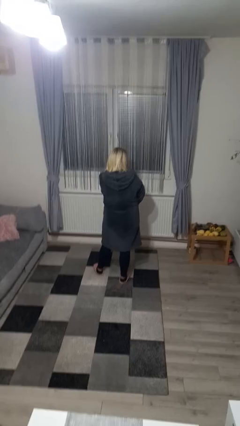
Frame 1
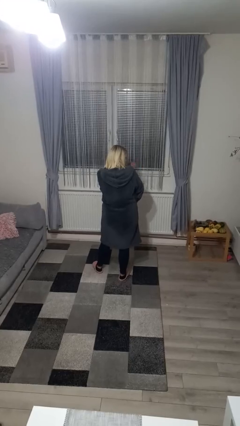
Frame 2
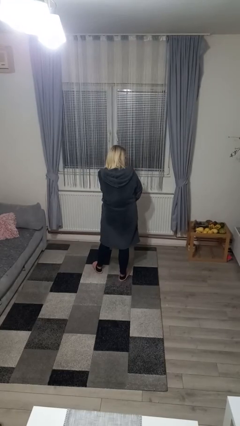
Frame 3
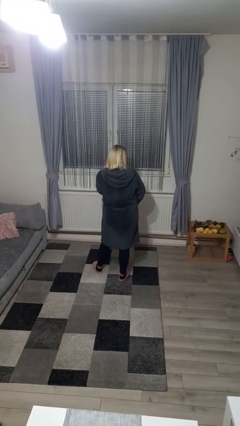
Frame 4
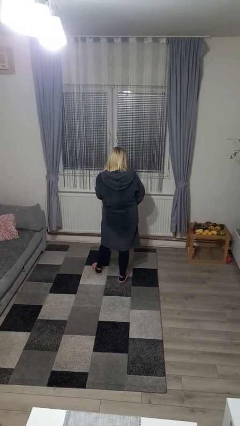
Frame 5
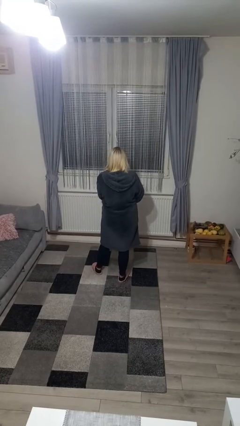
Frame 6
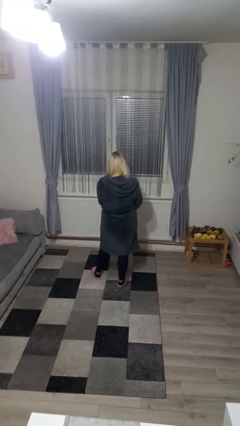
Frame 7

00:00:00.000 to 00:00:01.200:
person swats bug

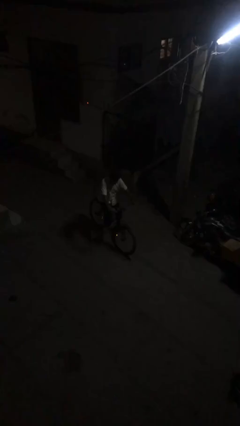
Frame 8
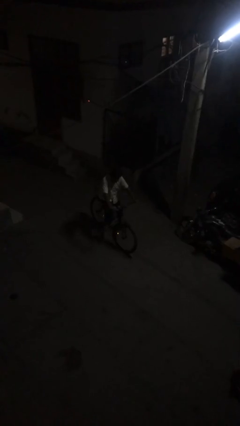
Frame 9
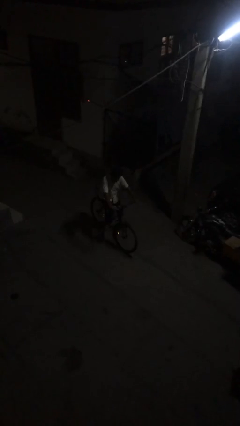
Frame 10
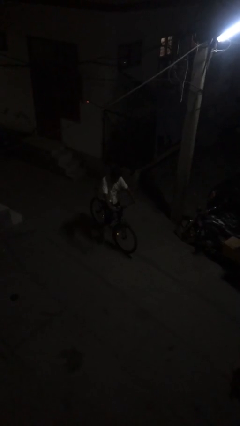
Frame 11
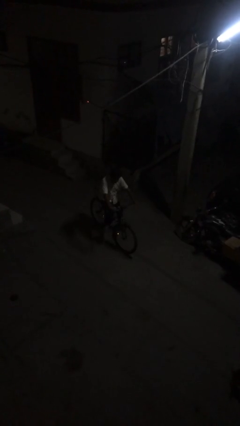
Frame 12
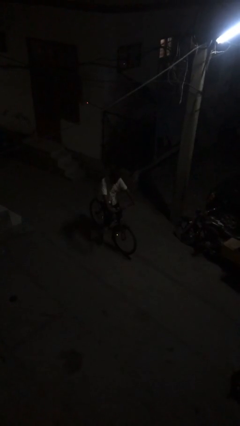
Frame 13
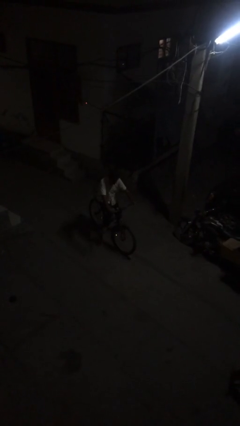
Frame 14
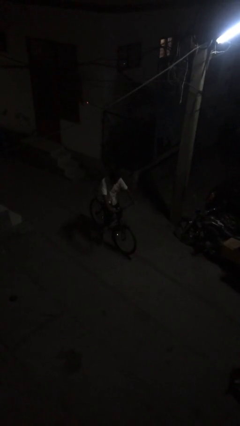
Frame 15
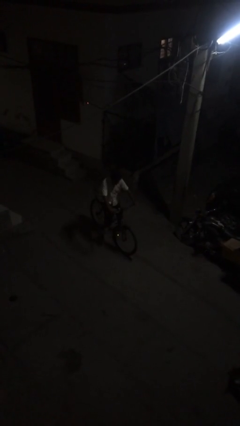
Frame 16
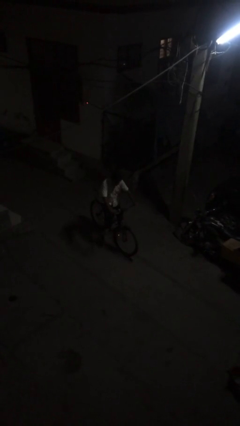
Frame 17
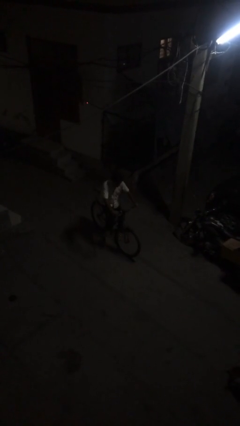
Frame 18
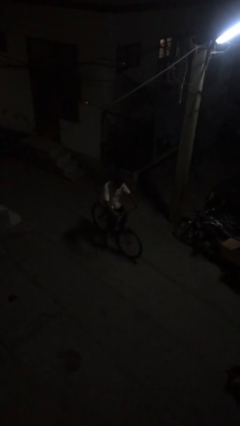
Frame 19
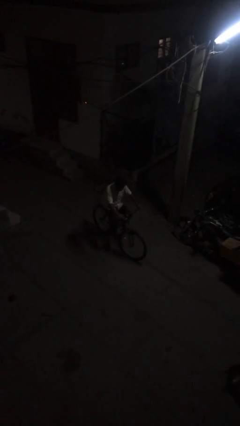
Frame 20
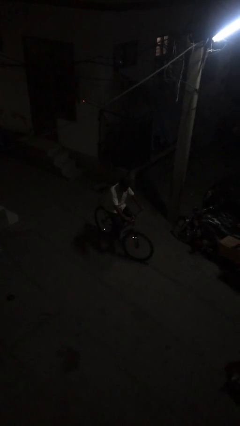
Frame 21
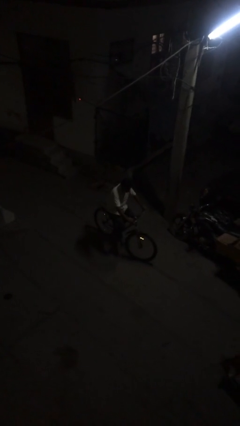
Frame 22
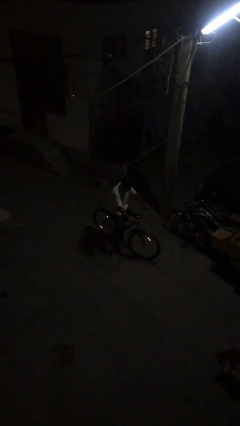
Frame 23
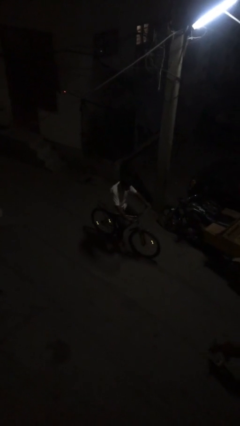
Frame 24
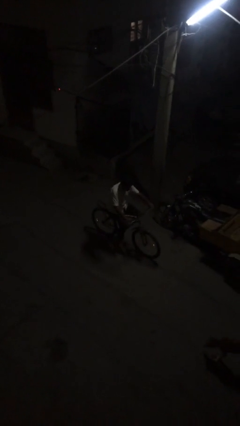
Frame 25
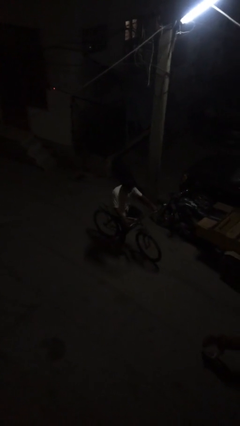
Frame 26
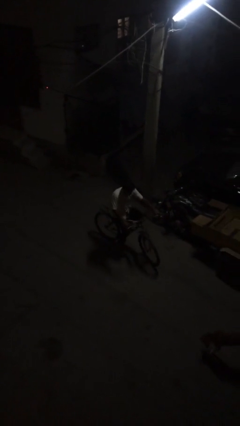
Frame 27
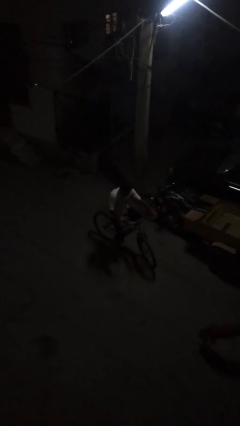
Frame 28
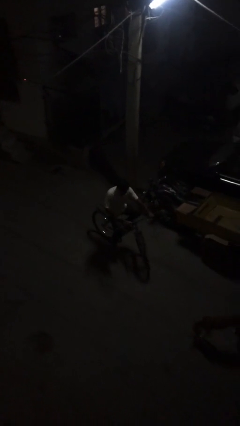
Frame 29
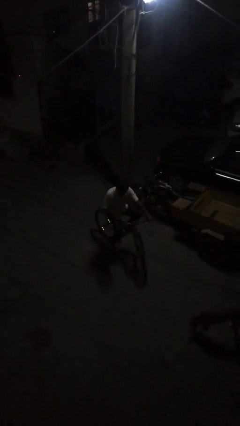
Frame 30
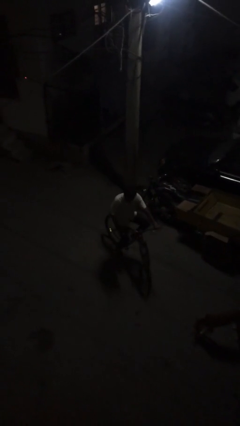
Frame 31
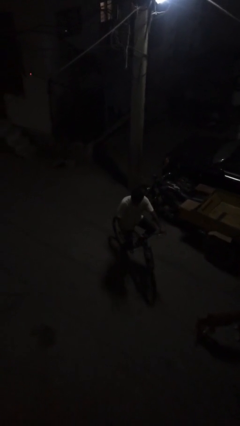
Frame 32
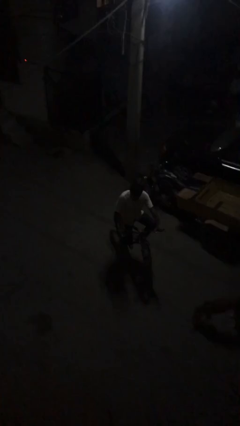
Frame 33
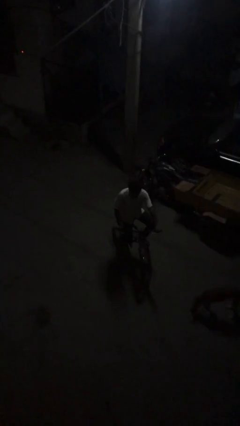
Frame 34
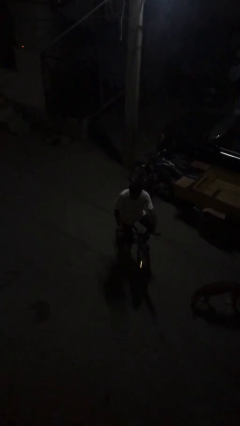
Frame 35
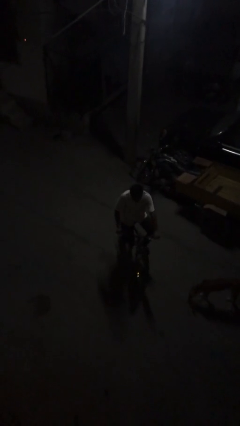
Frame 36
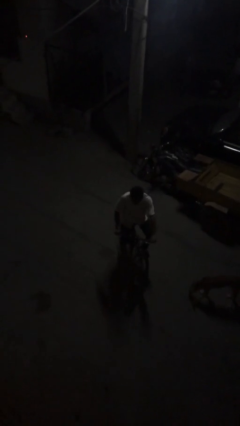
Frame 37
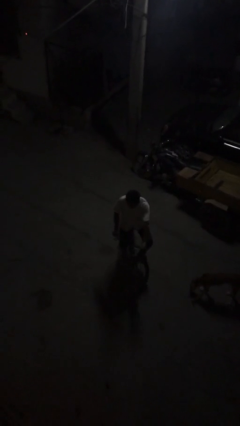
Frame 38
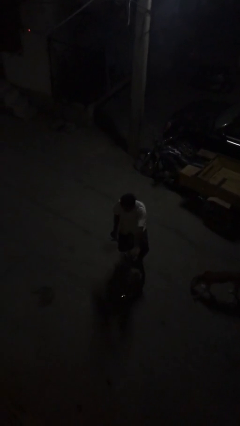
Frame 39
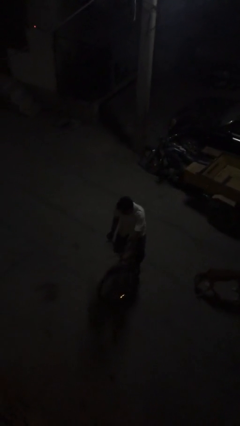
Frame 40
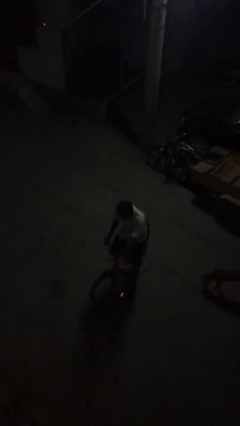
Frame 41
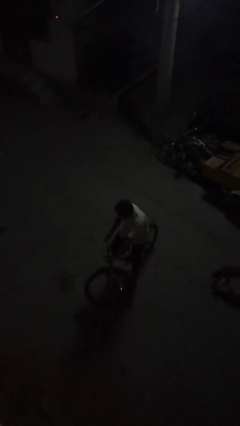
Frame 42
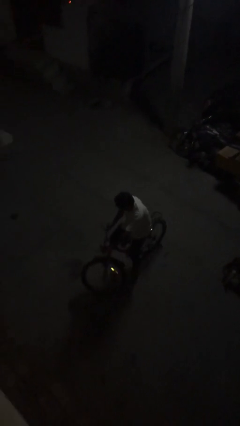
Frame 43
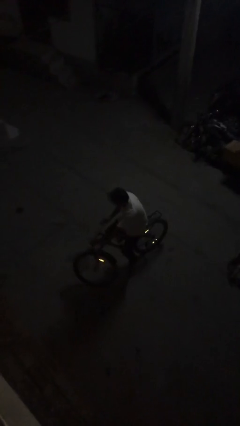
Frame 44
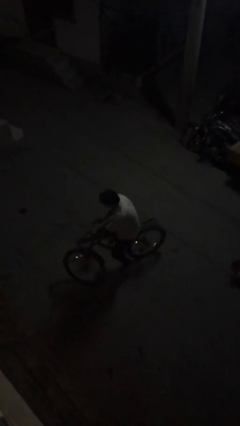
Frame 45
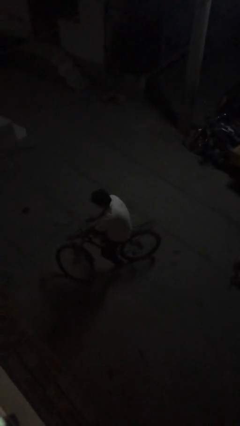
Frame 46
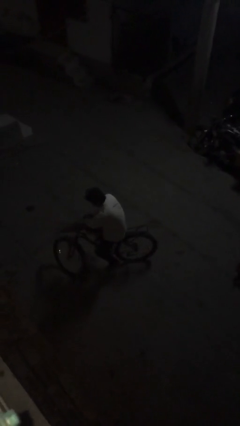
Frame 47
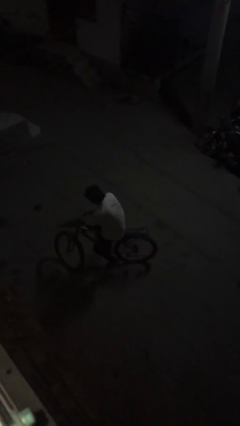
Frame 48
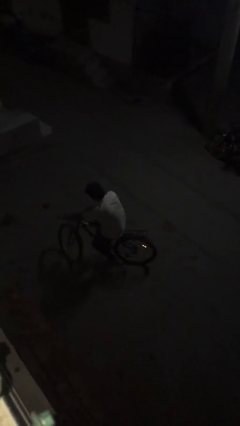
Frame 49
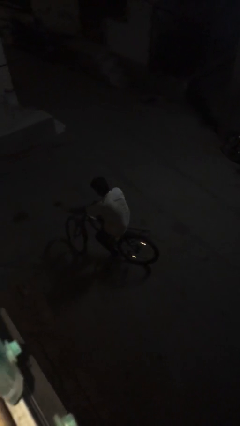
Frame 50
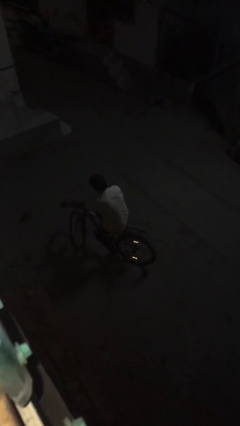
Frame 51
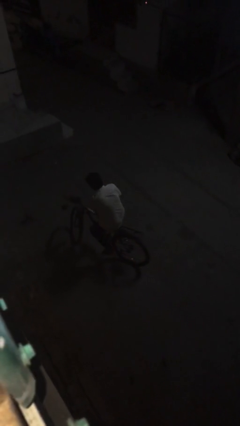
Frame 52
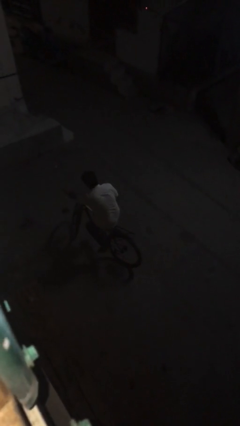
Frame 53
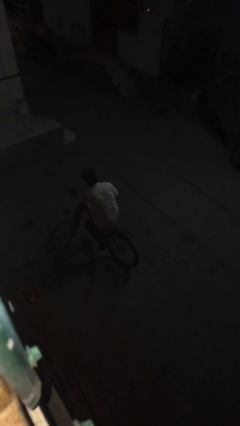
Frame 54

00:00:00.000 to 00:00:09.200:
person rides bicycle

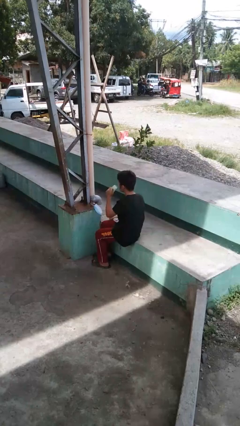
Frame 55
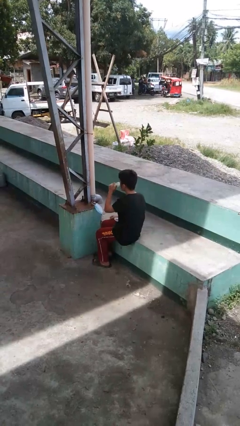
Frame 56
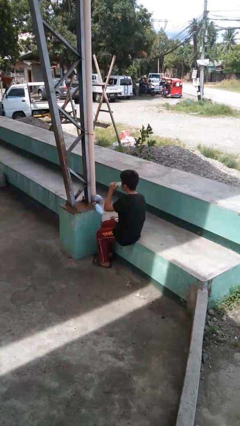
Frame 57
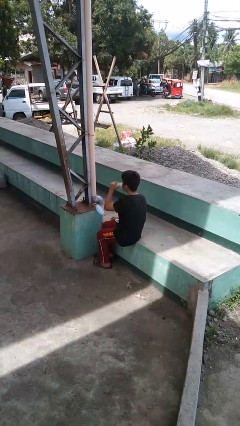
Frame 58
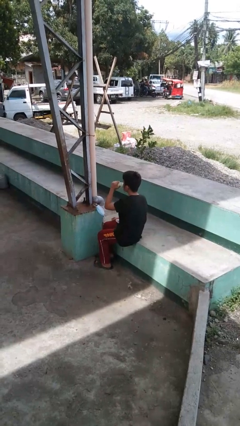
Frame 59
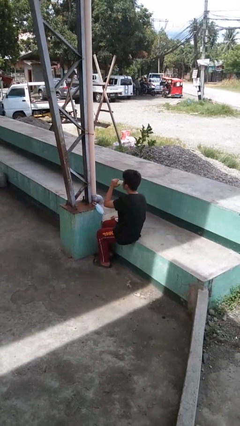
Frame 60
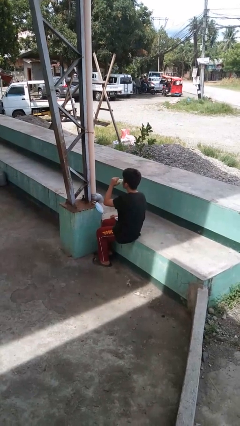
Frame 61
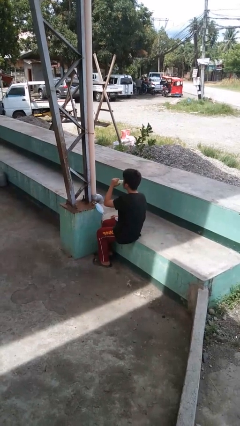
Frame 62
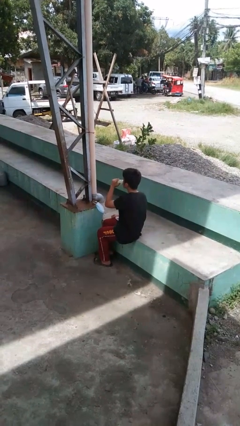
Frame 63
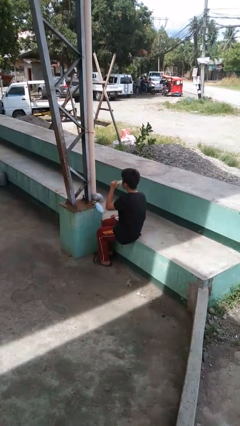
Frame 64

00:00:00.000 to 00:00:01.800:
person drinks from bottle

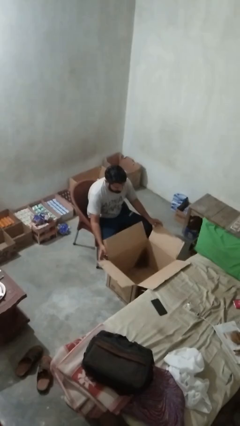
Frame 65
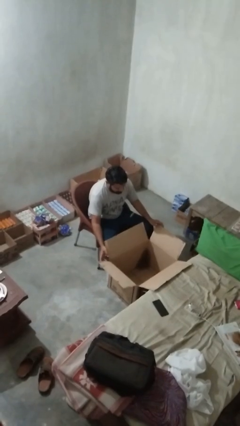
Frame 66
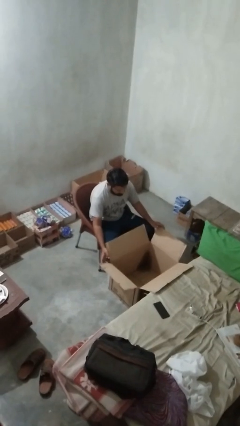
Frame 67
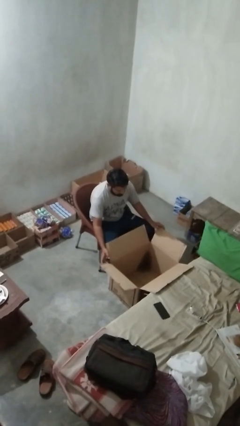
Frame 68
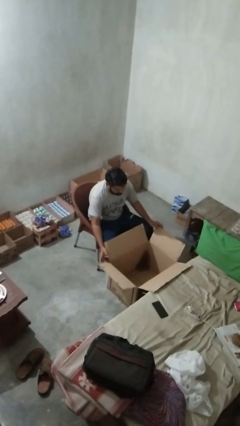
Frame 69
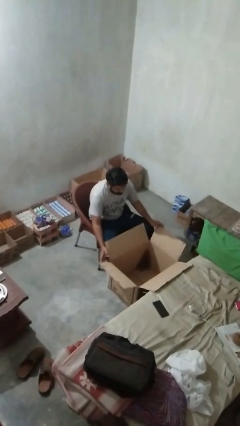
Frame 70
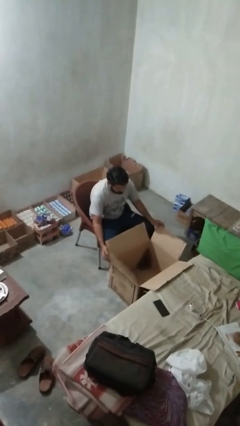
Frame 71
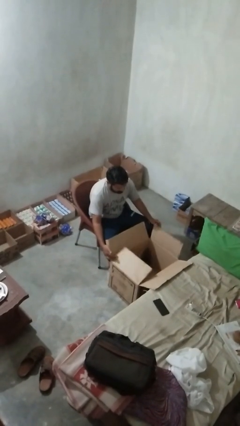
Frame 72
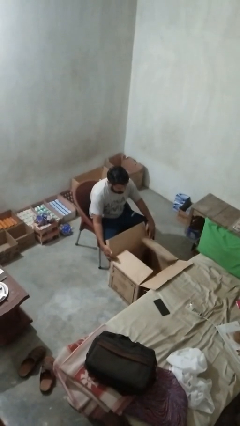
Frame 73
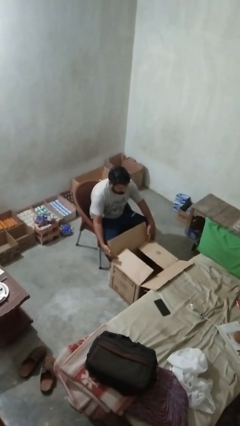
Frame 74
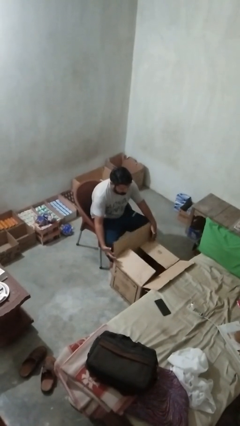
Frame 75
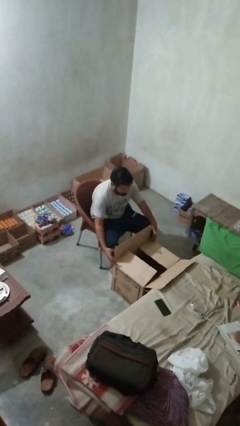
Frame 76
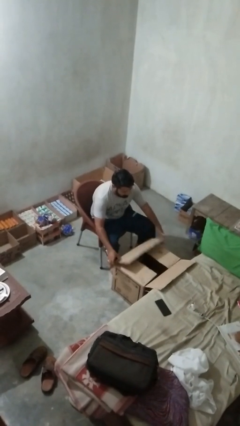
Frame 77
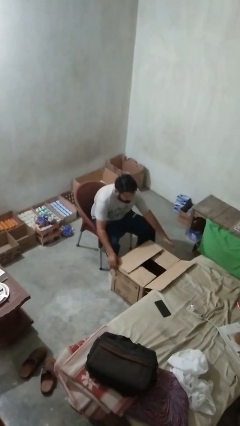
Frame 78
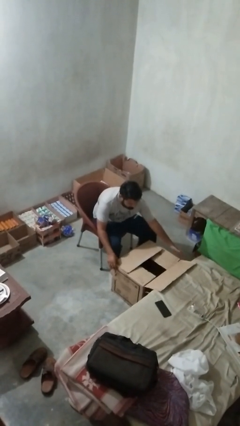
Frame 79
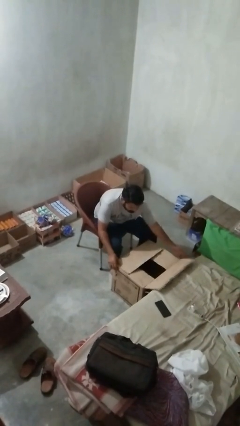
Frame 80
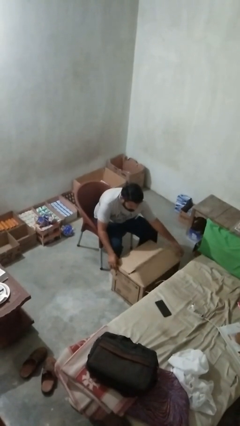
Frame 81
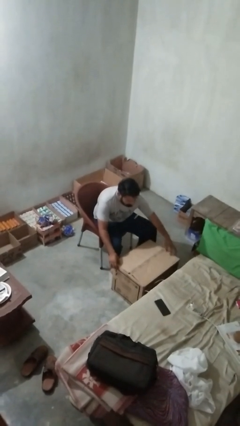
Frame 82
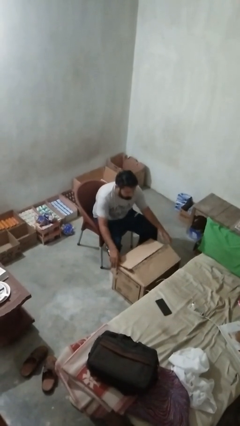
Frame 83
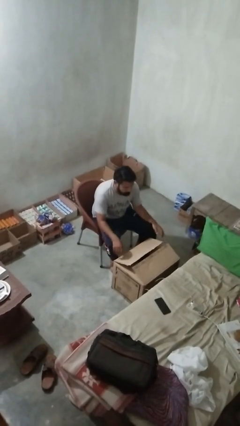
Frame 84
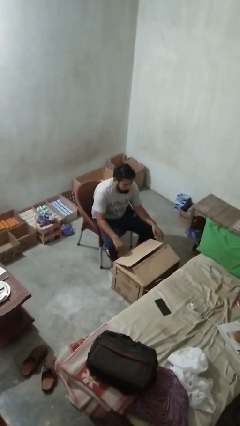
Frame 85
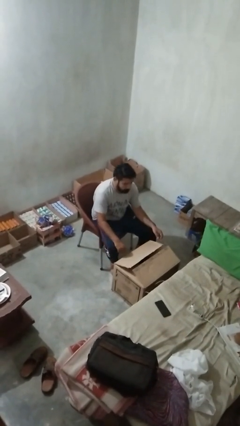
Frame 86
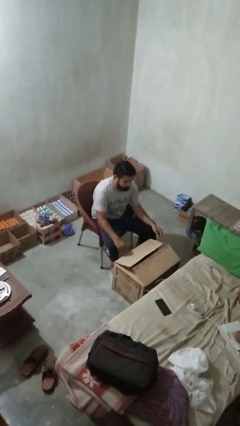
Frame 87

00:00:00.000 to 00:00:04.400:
person closes box

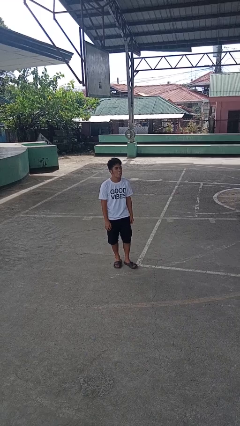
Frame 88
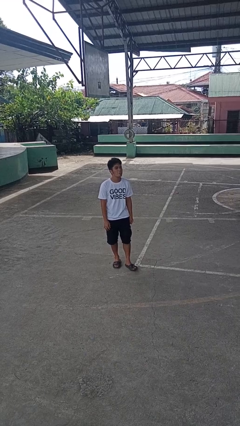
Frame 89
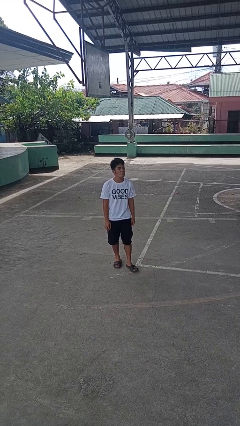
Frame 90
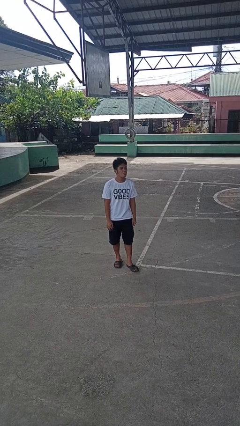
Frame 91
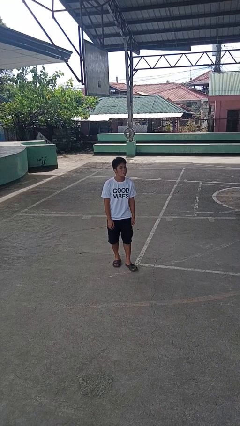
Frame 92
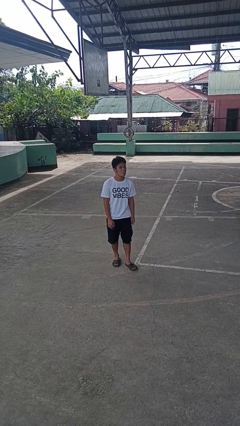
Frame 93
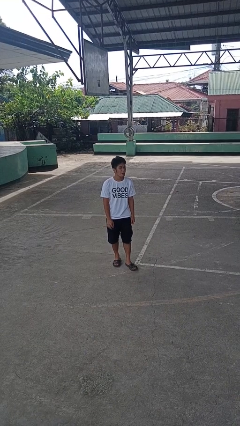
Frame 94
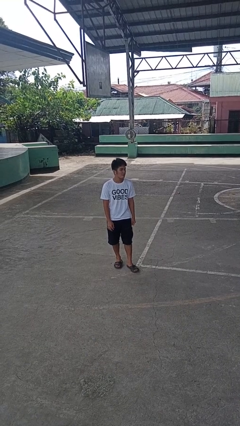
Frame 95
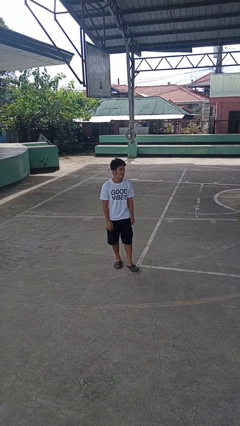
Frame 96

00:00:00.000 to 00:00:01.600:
person sticks out tongue
